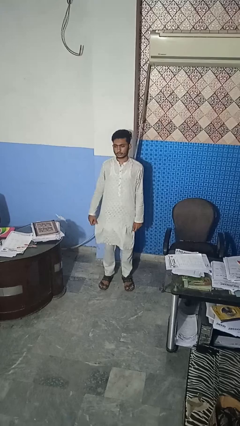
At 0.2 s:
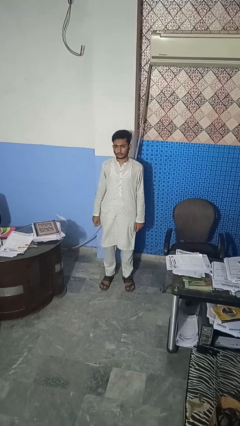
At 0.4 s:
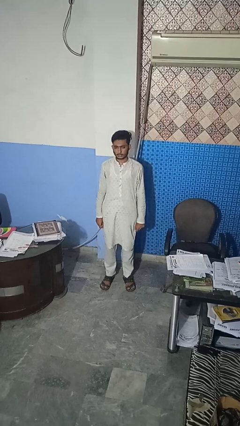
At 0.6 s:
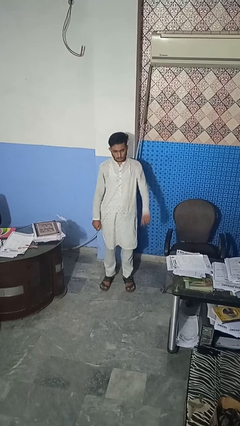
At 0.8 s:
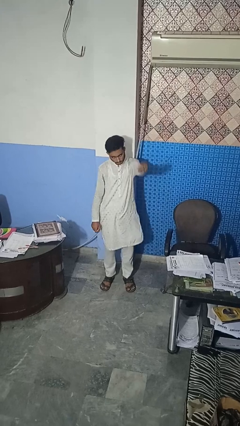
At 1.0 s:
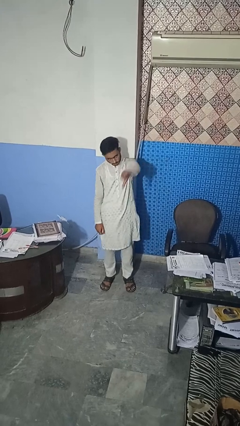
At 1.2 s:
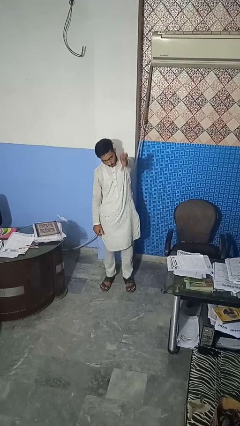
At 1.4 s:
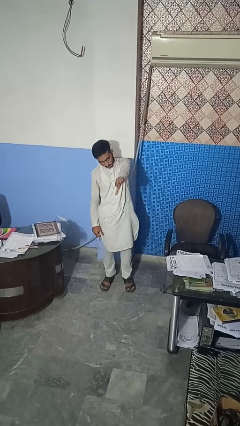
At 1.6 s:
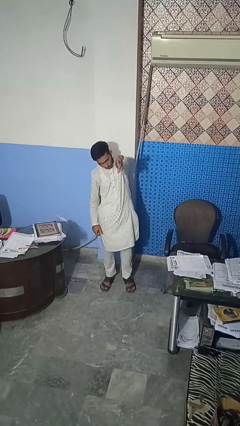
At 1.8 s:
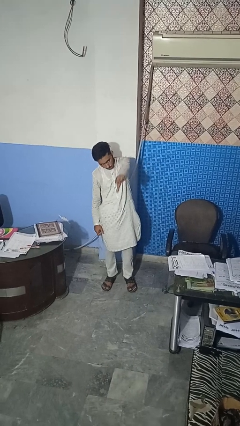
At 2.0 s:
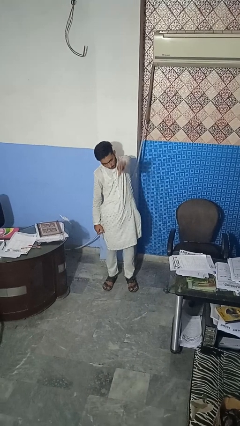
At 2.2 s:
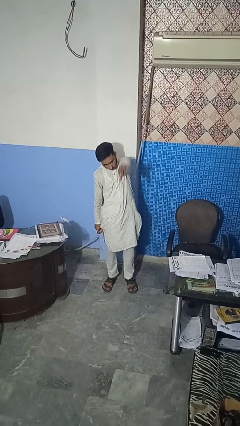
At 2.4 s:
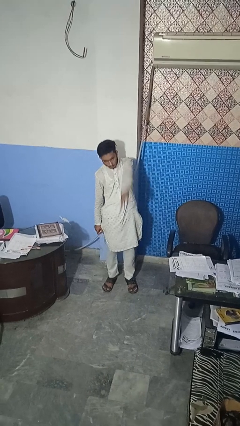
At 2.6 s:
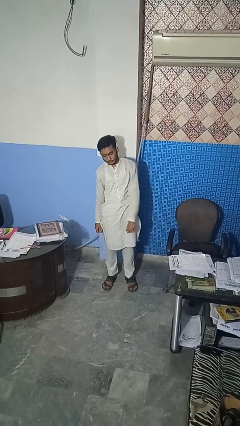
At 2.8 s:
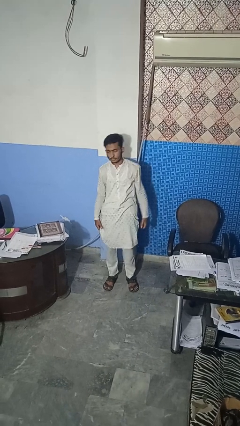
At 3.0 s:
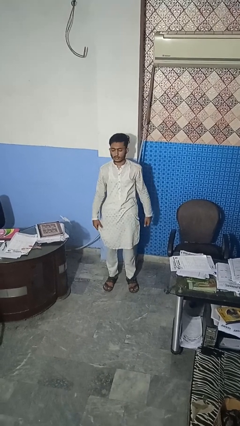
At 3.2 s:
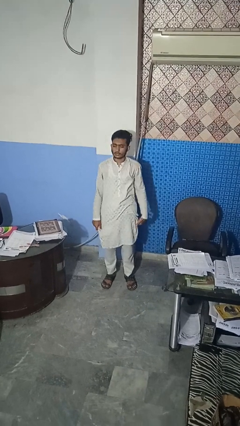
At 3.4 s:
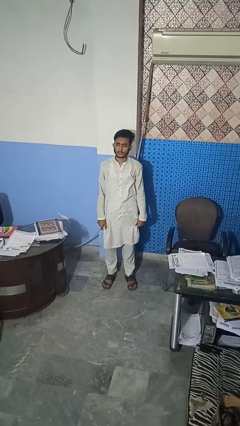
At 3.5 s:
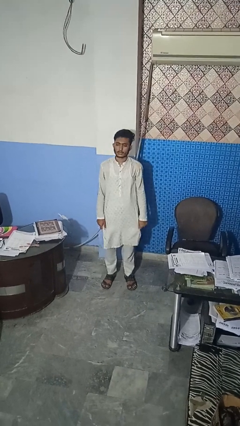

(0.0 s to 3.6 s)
person gestures thumbs down

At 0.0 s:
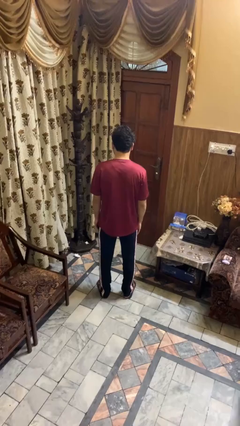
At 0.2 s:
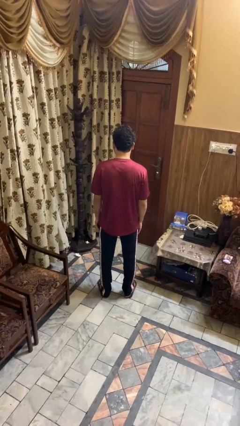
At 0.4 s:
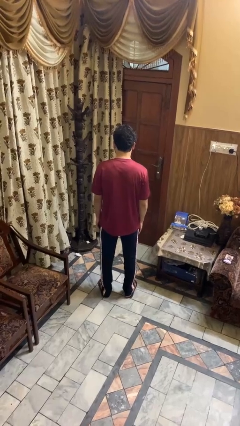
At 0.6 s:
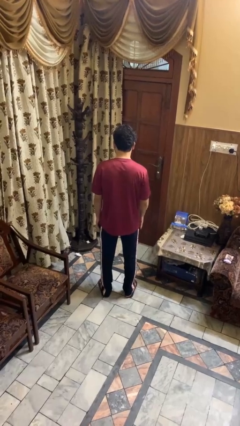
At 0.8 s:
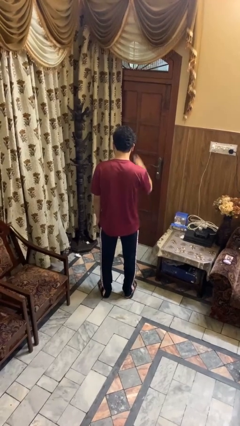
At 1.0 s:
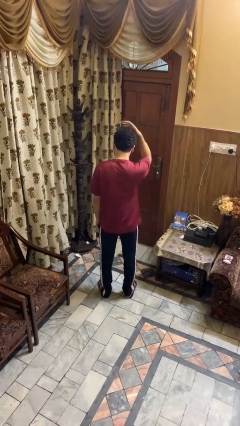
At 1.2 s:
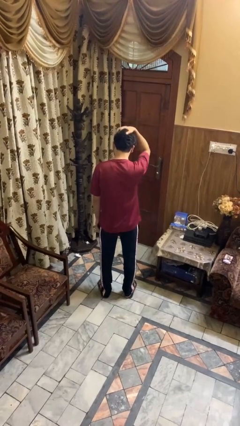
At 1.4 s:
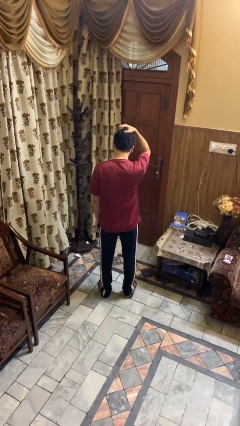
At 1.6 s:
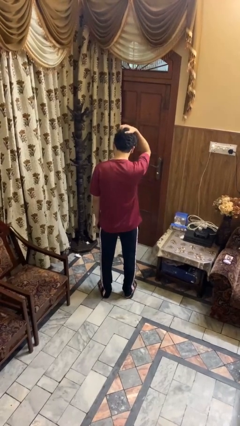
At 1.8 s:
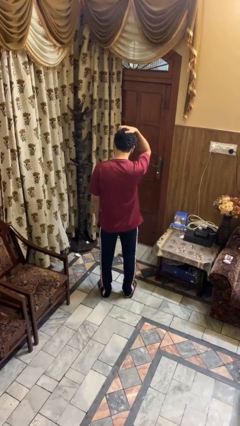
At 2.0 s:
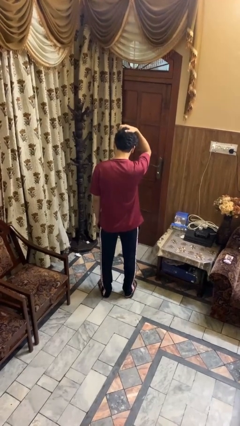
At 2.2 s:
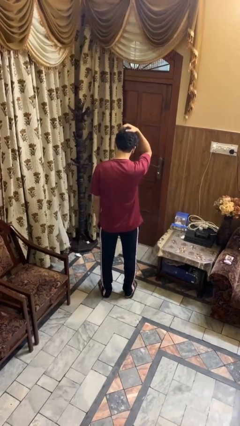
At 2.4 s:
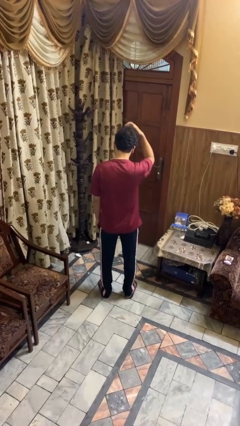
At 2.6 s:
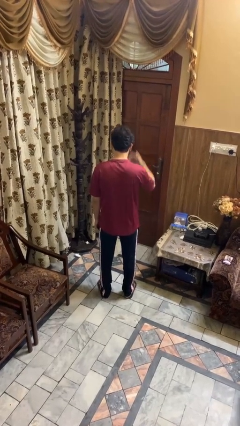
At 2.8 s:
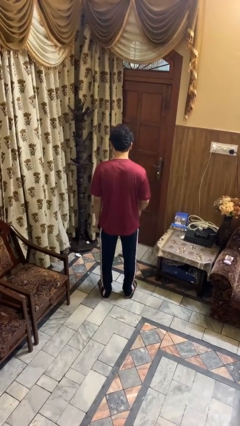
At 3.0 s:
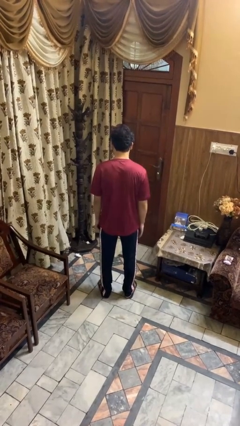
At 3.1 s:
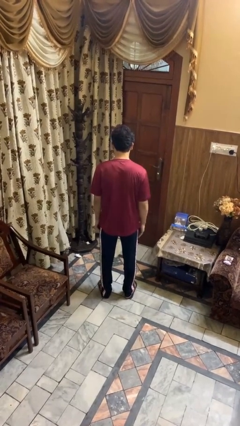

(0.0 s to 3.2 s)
person scratches face

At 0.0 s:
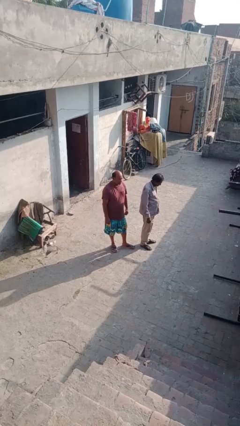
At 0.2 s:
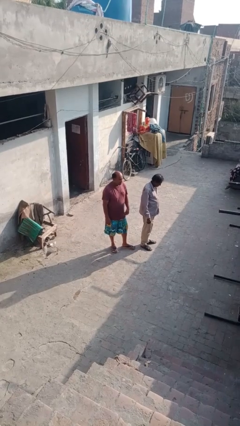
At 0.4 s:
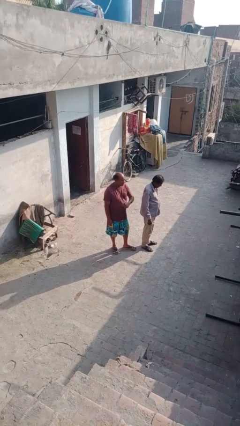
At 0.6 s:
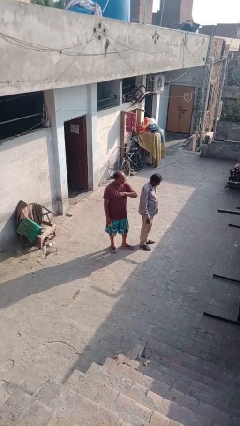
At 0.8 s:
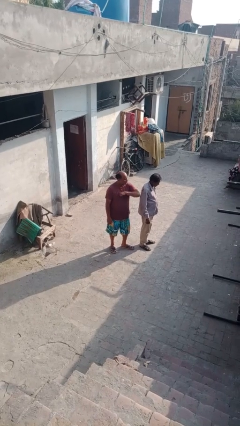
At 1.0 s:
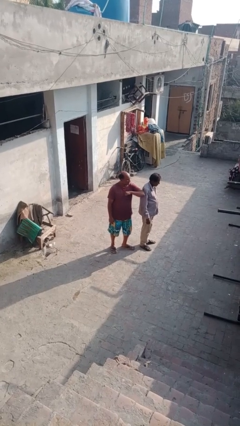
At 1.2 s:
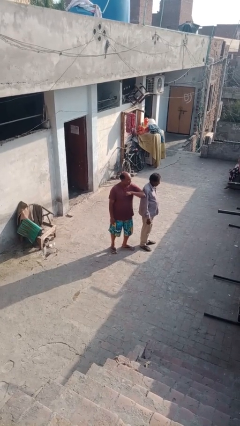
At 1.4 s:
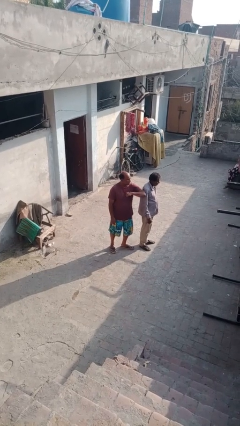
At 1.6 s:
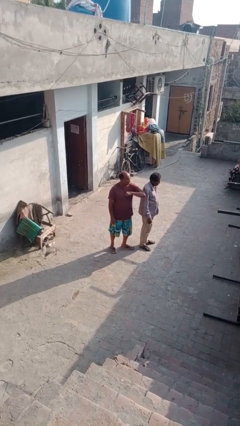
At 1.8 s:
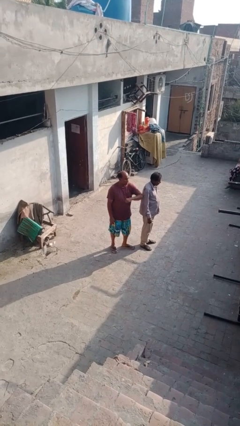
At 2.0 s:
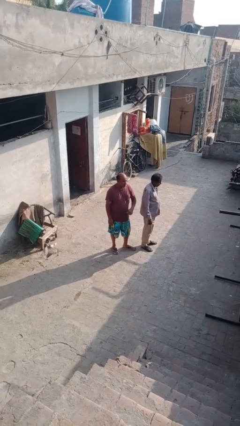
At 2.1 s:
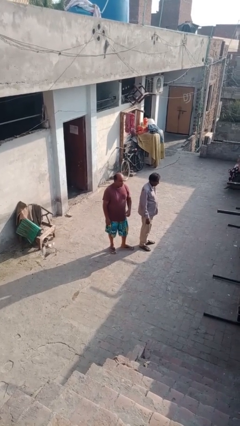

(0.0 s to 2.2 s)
person nudges person with elbow

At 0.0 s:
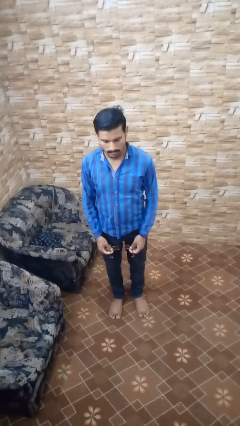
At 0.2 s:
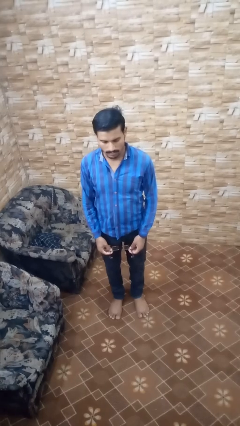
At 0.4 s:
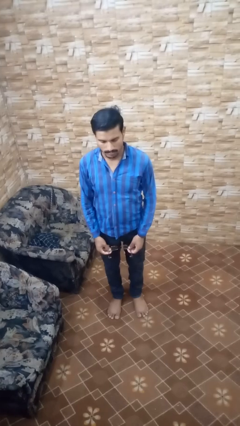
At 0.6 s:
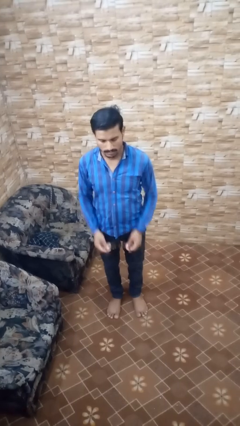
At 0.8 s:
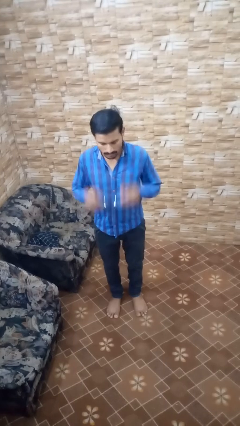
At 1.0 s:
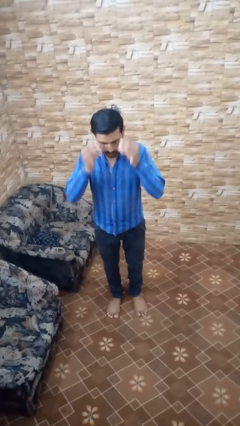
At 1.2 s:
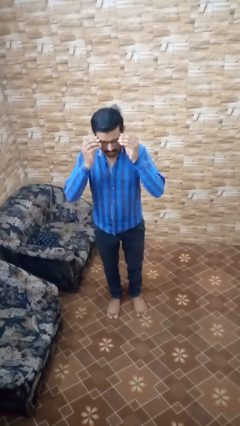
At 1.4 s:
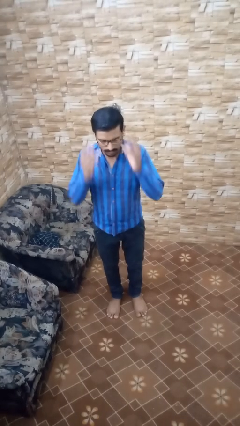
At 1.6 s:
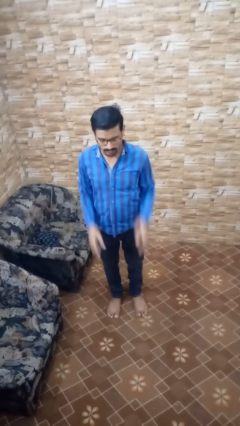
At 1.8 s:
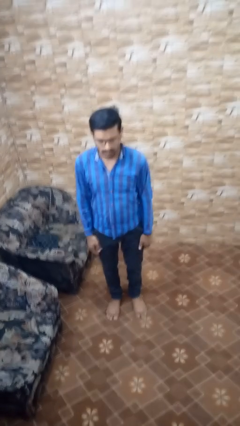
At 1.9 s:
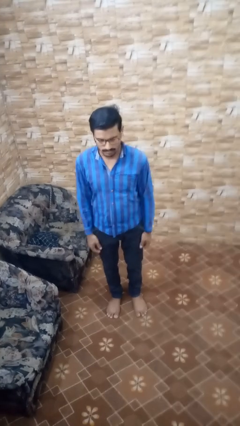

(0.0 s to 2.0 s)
person puts on glasses

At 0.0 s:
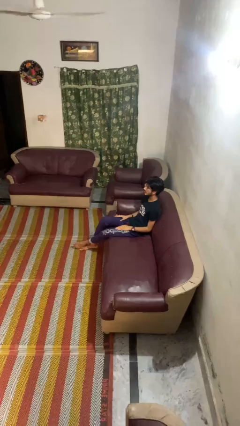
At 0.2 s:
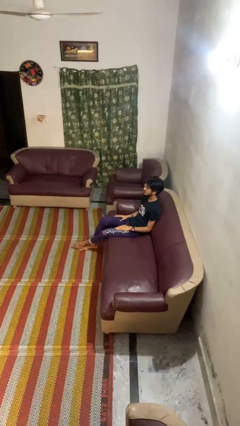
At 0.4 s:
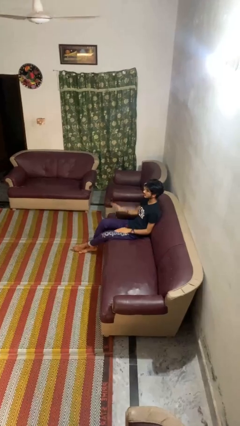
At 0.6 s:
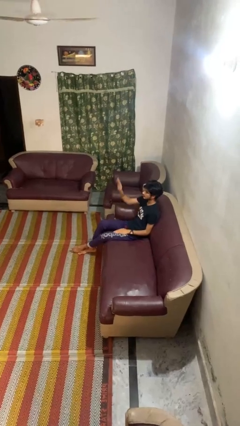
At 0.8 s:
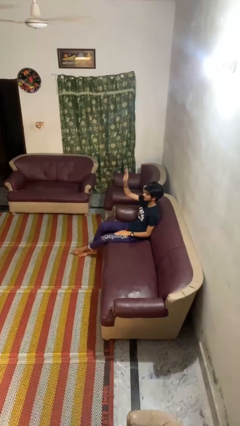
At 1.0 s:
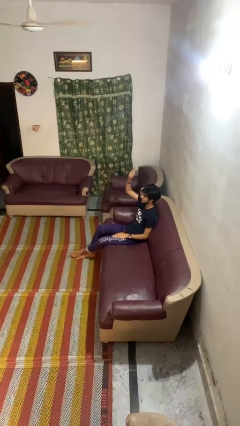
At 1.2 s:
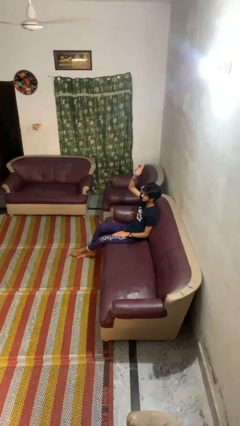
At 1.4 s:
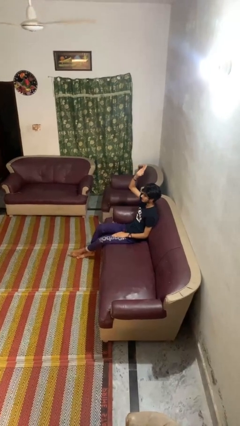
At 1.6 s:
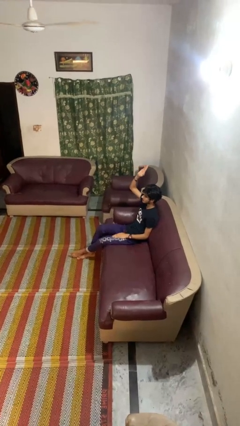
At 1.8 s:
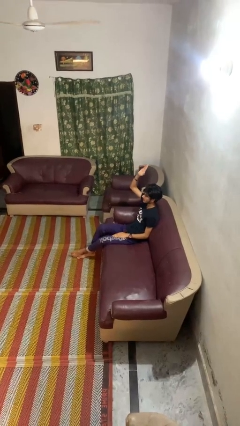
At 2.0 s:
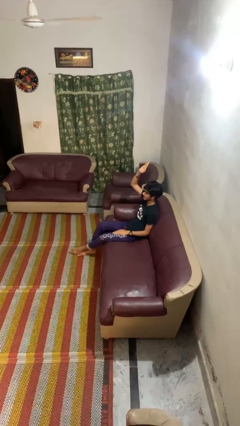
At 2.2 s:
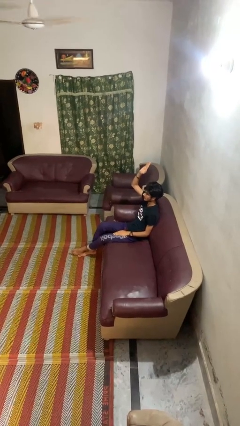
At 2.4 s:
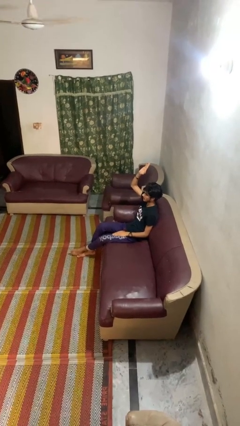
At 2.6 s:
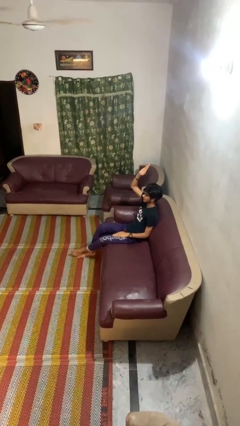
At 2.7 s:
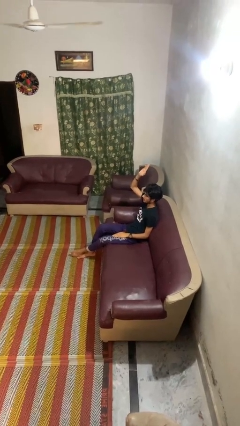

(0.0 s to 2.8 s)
person gestures raise hand

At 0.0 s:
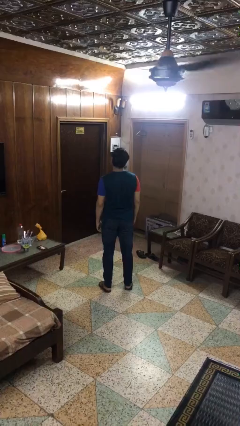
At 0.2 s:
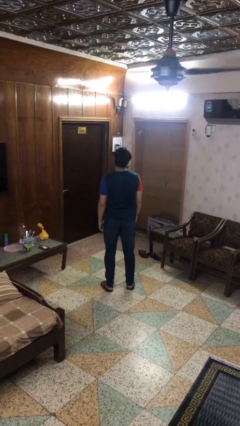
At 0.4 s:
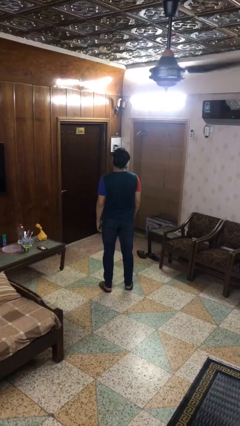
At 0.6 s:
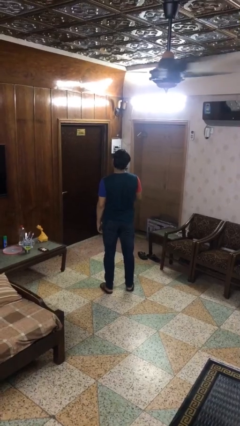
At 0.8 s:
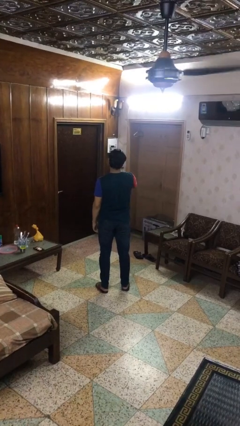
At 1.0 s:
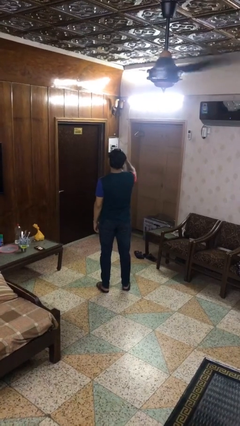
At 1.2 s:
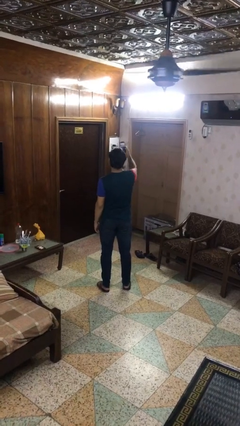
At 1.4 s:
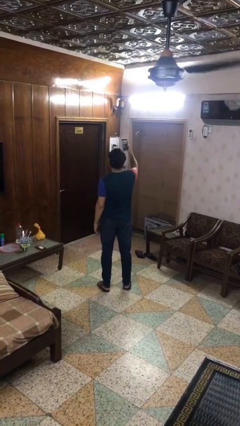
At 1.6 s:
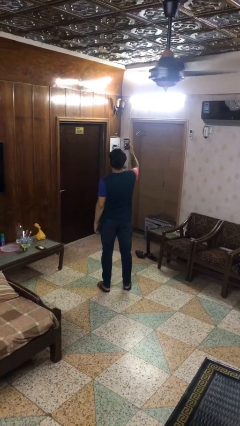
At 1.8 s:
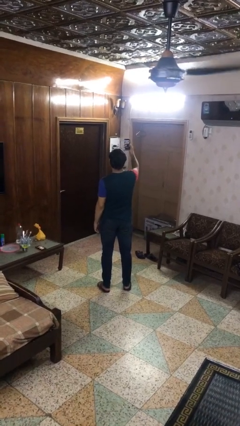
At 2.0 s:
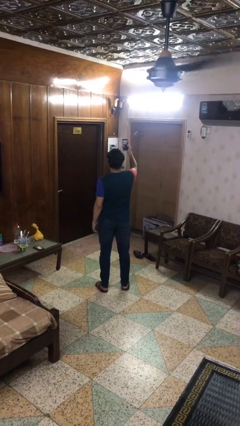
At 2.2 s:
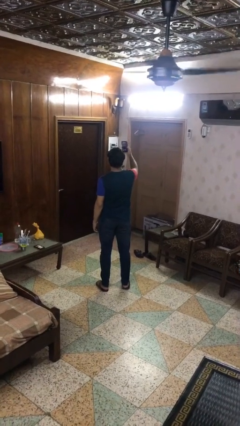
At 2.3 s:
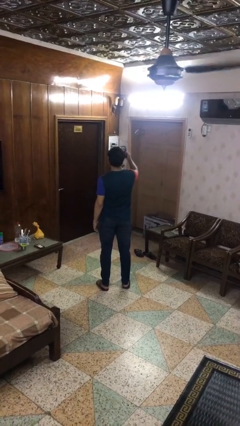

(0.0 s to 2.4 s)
person takes selfie

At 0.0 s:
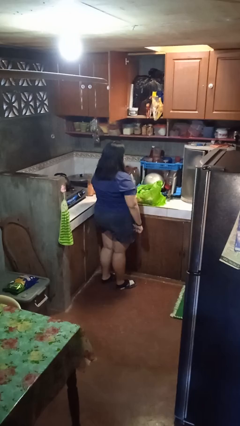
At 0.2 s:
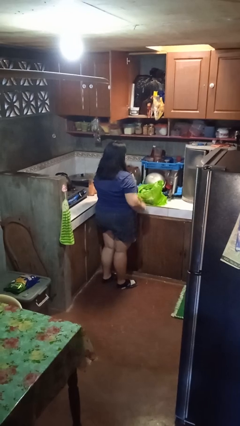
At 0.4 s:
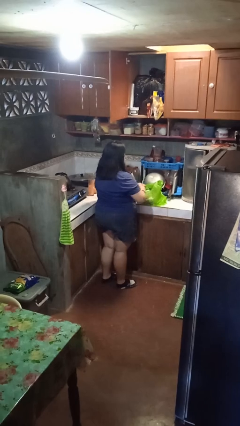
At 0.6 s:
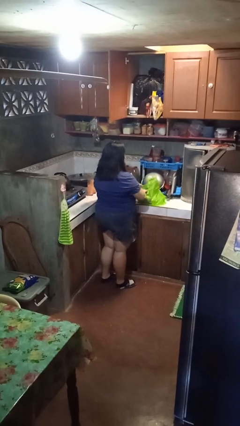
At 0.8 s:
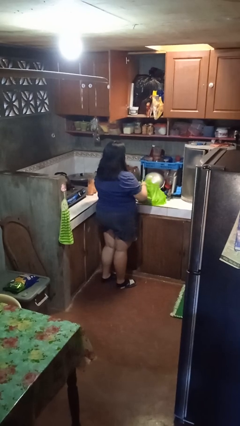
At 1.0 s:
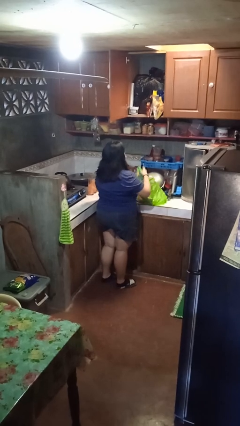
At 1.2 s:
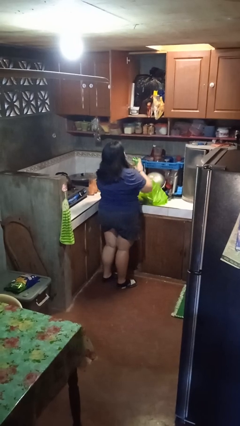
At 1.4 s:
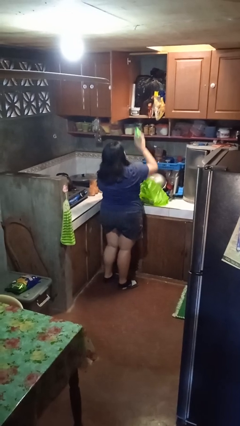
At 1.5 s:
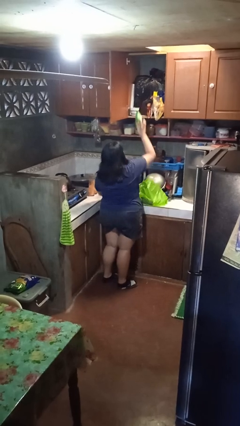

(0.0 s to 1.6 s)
person loads groceries into cabinet
